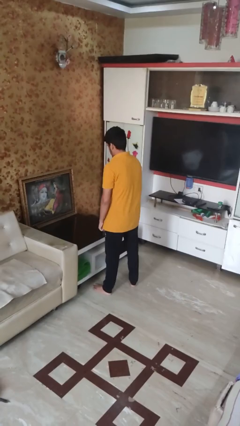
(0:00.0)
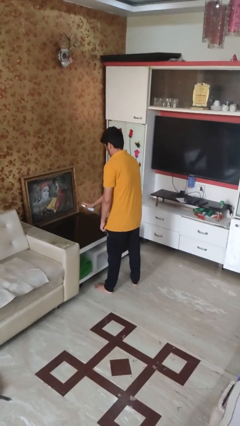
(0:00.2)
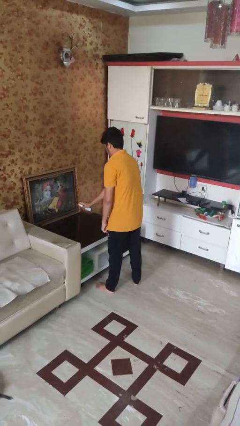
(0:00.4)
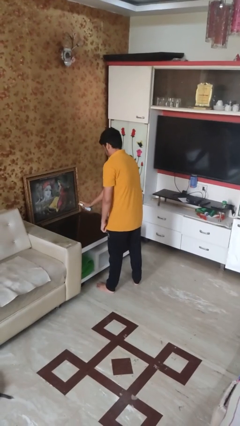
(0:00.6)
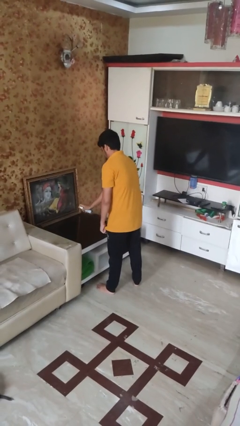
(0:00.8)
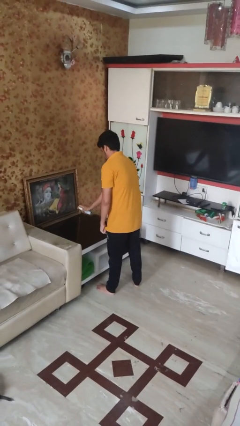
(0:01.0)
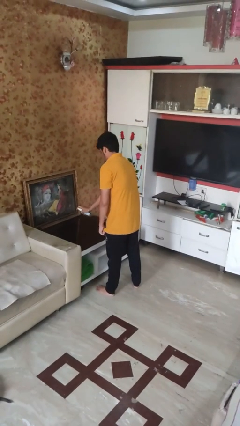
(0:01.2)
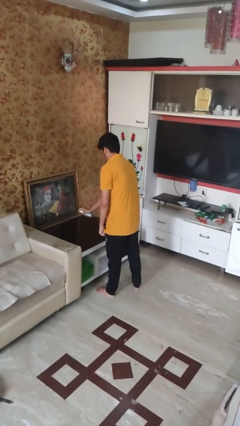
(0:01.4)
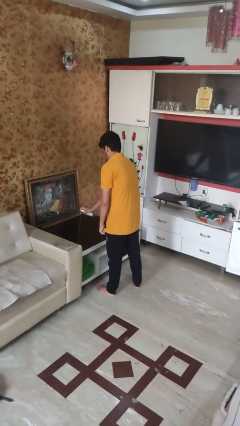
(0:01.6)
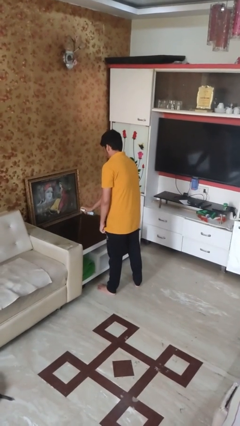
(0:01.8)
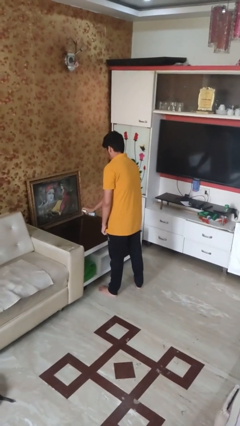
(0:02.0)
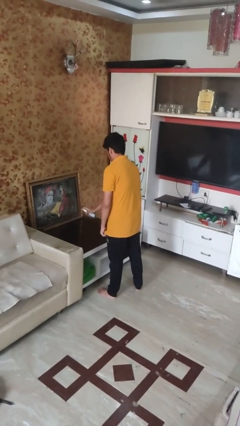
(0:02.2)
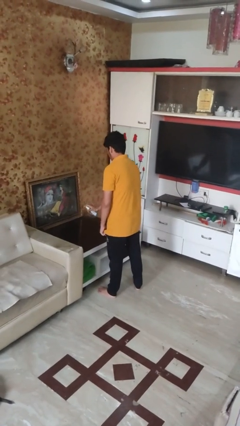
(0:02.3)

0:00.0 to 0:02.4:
person sprays from bottle

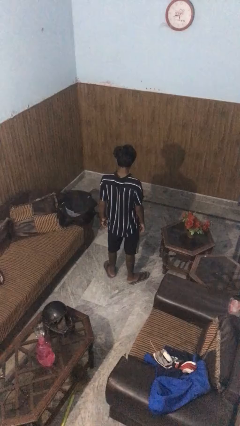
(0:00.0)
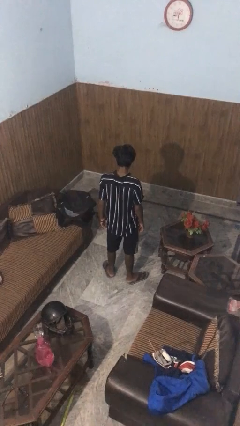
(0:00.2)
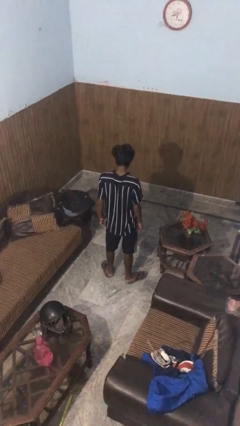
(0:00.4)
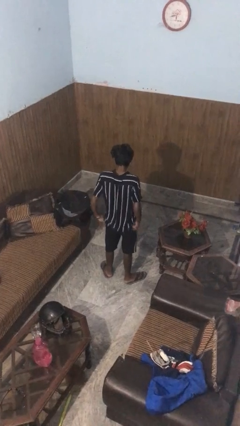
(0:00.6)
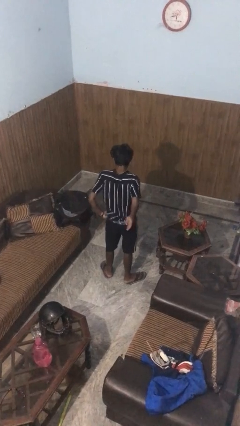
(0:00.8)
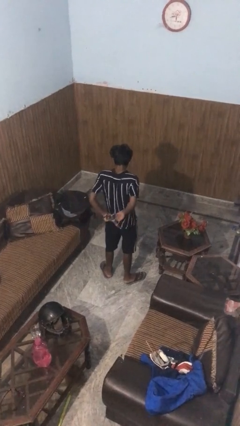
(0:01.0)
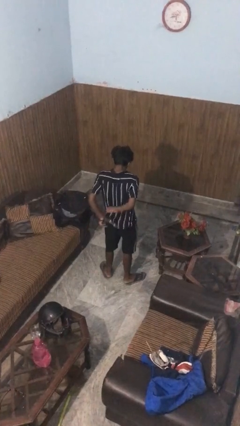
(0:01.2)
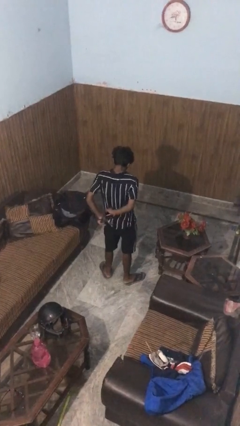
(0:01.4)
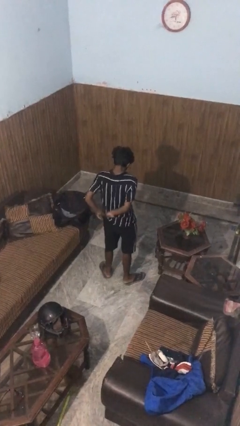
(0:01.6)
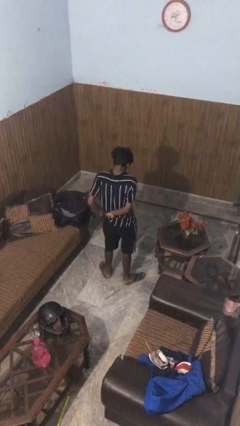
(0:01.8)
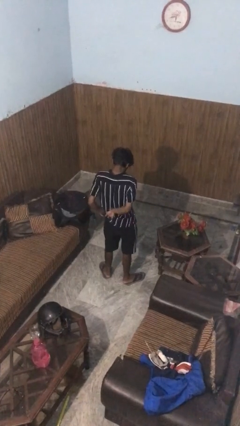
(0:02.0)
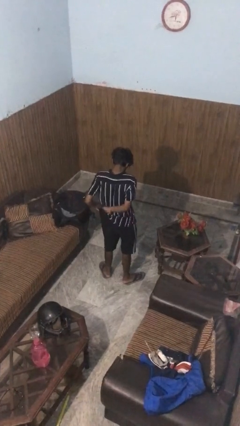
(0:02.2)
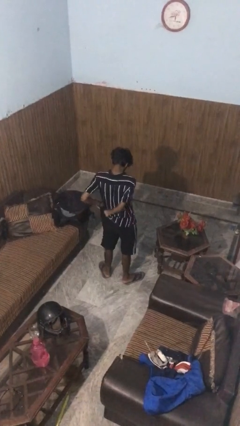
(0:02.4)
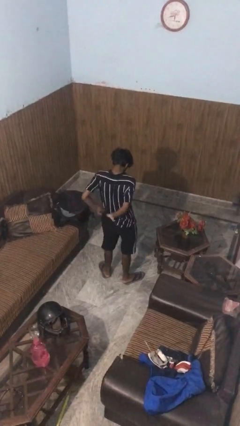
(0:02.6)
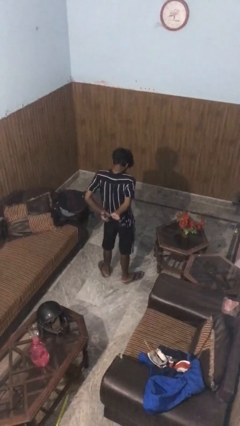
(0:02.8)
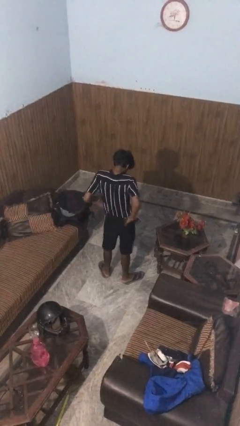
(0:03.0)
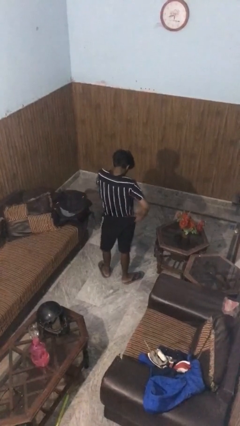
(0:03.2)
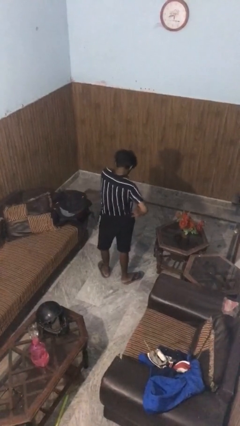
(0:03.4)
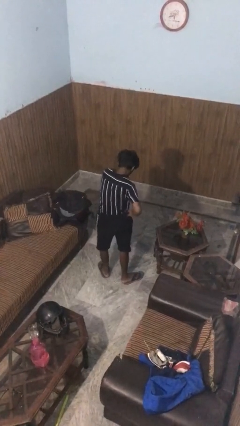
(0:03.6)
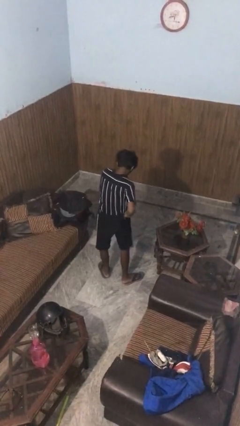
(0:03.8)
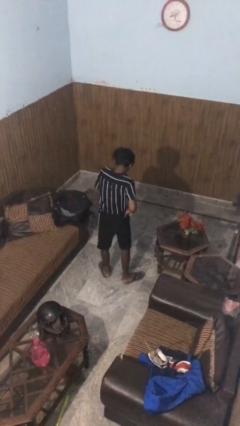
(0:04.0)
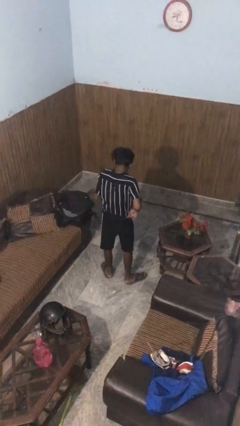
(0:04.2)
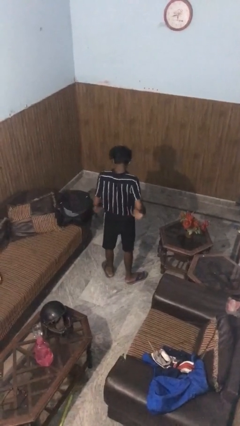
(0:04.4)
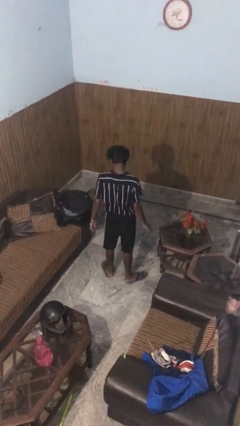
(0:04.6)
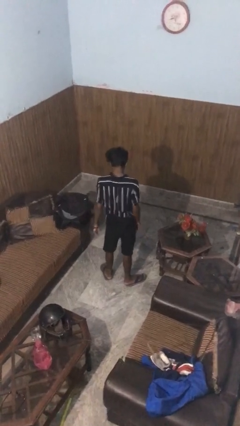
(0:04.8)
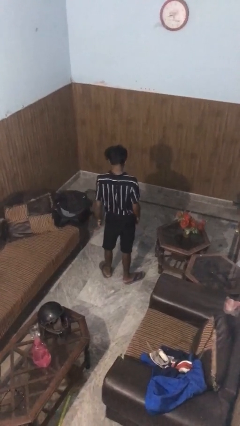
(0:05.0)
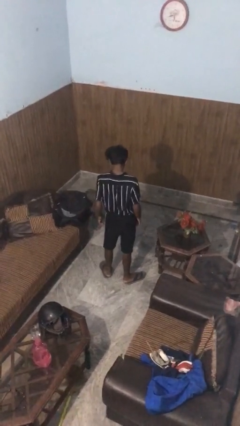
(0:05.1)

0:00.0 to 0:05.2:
person tucks in shirt

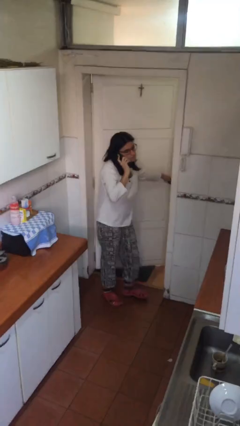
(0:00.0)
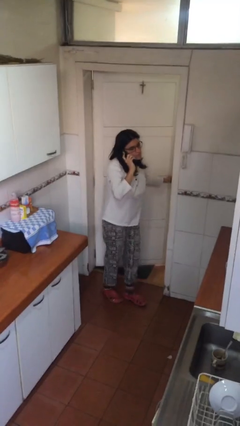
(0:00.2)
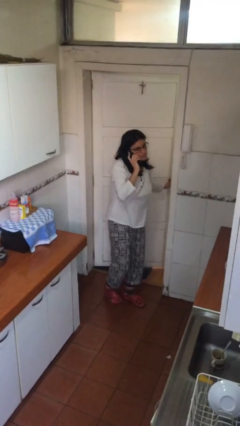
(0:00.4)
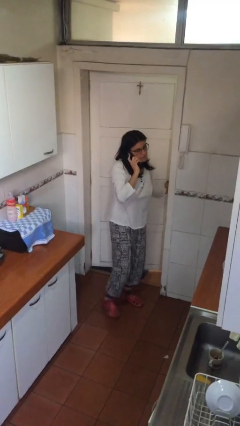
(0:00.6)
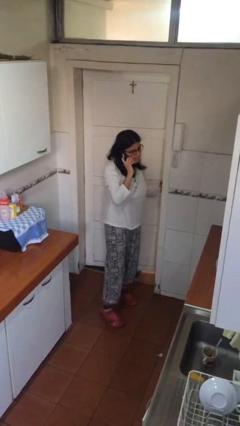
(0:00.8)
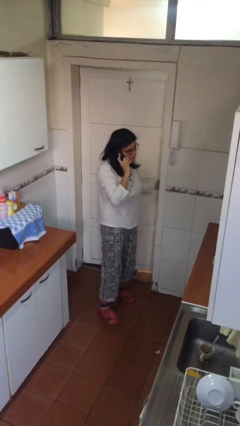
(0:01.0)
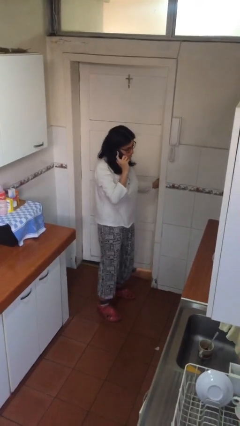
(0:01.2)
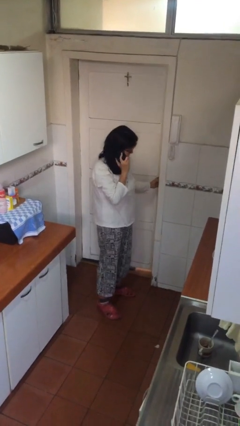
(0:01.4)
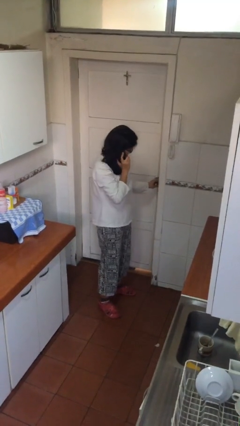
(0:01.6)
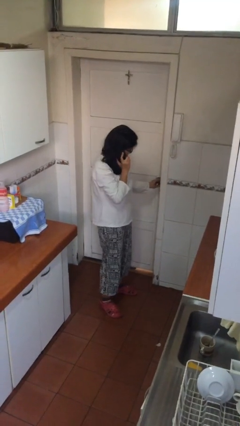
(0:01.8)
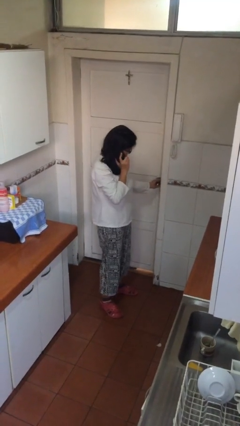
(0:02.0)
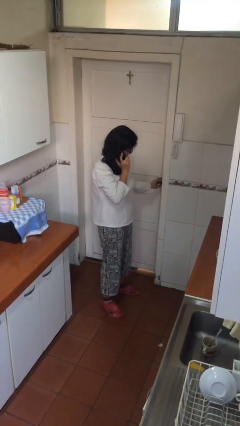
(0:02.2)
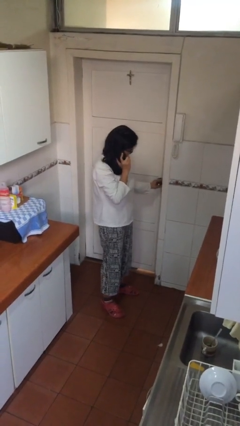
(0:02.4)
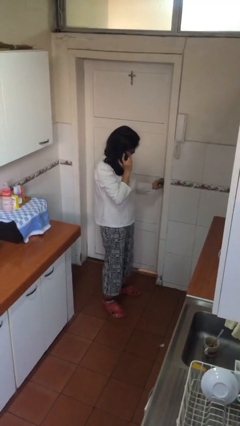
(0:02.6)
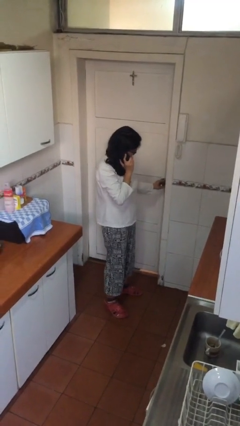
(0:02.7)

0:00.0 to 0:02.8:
person closes facility door

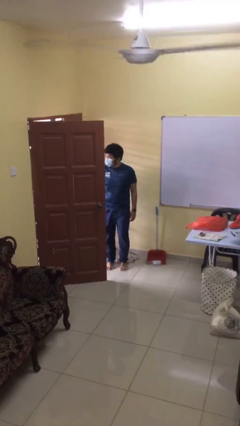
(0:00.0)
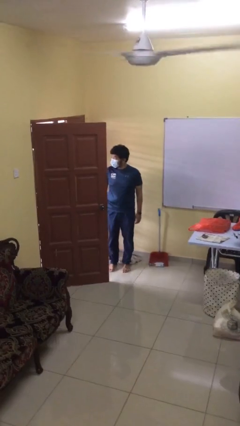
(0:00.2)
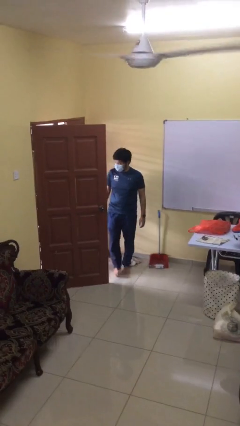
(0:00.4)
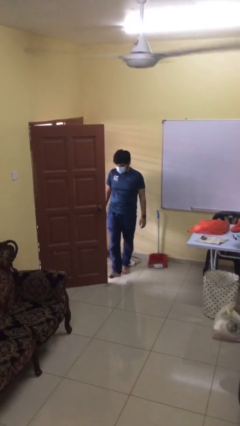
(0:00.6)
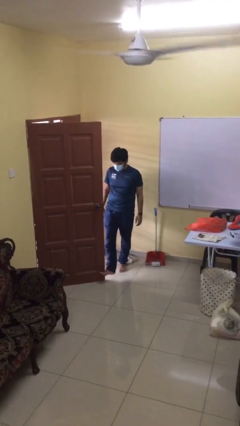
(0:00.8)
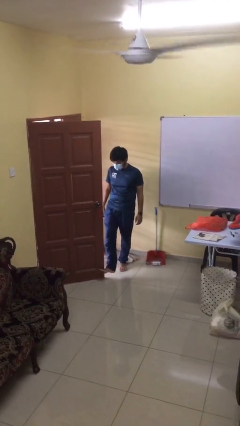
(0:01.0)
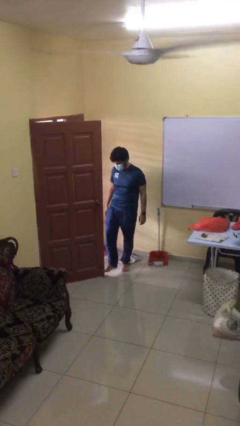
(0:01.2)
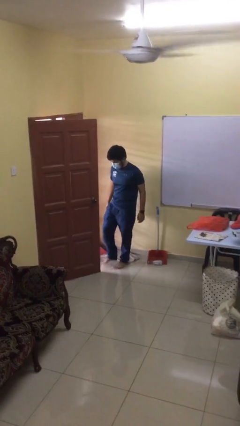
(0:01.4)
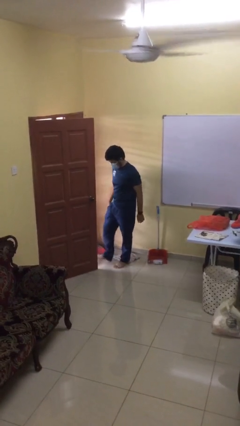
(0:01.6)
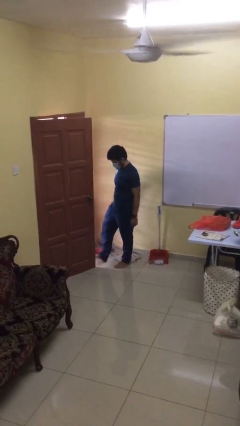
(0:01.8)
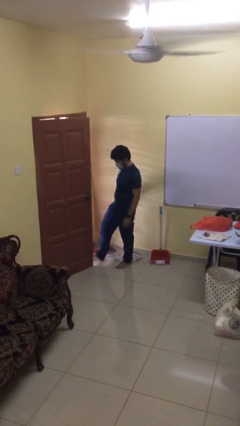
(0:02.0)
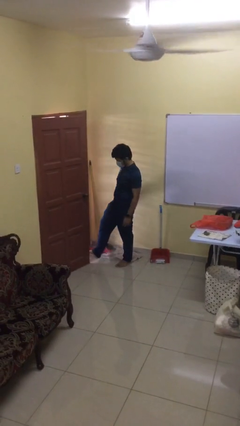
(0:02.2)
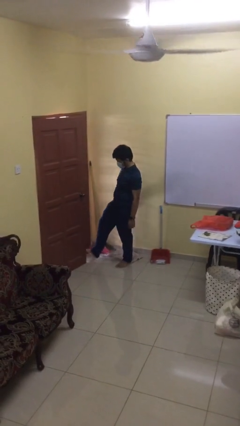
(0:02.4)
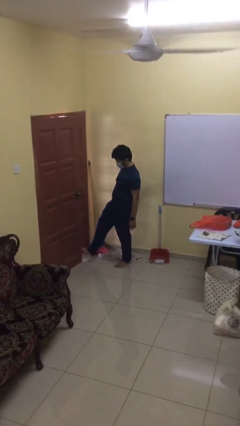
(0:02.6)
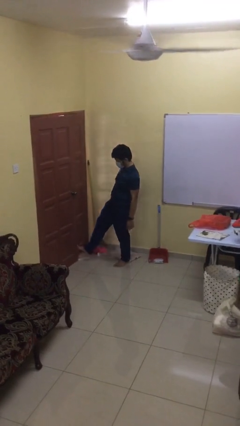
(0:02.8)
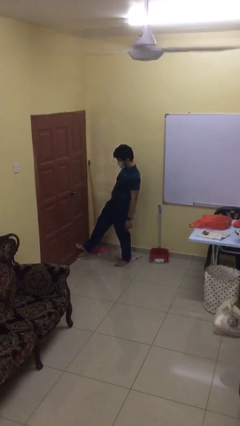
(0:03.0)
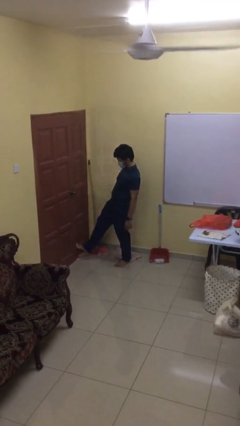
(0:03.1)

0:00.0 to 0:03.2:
person closes door with foot

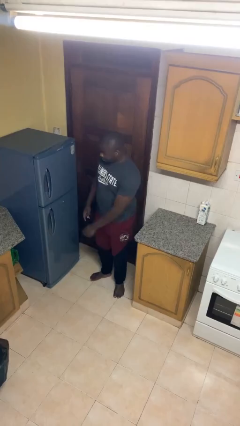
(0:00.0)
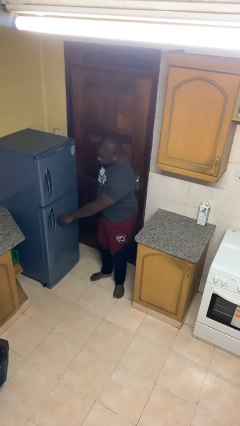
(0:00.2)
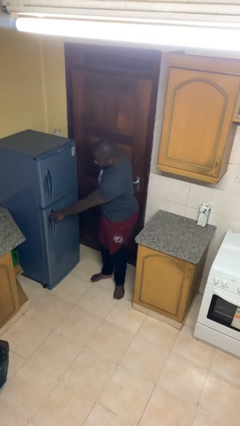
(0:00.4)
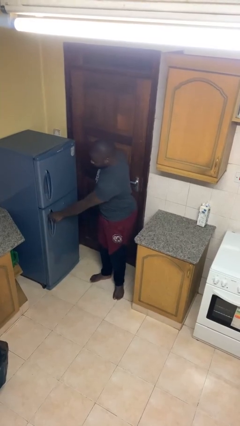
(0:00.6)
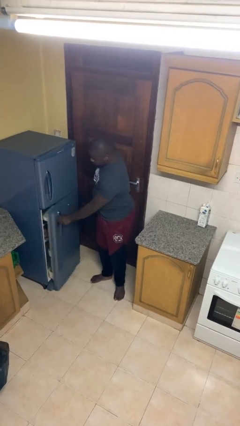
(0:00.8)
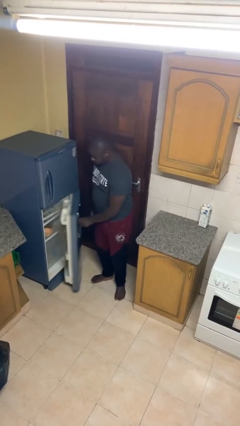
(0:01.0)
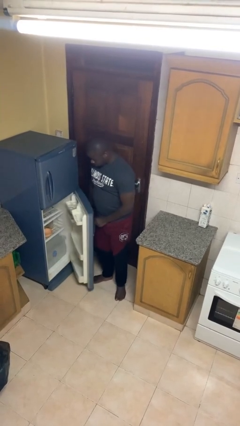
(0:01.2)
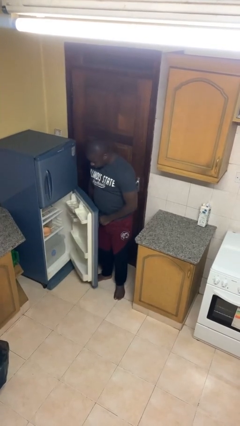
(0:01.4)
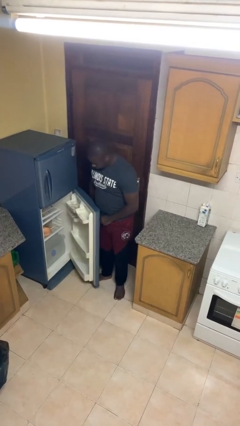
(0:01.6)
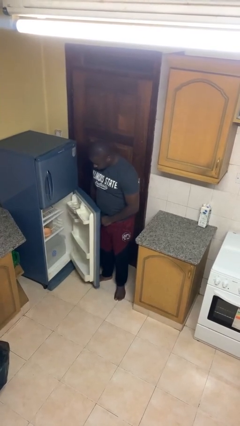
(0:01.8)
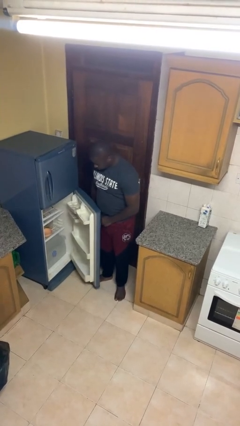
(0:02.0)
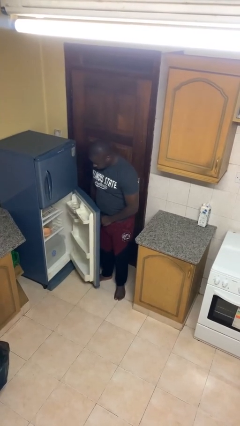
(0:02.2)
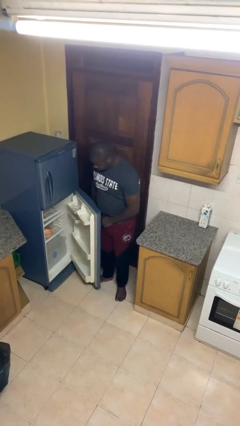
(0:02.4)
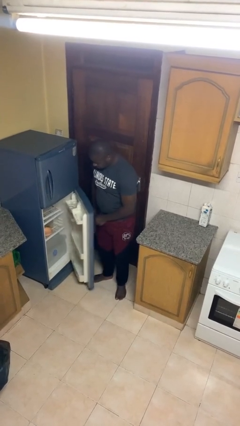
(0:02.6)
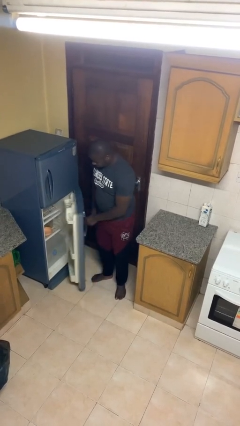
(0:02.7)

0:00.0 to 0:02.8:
person opens refrigerator

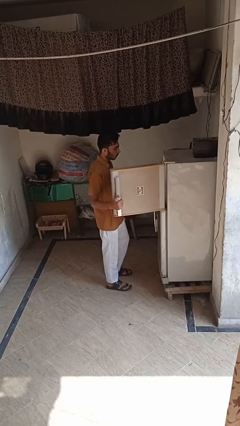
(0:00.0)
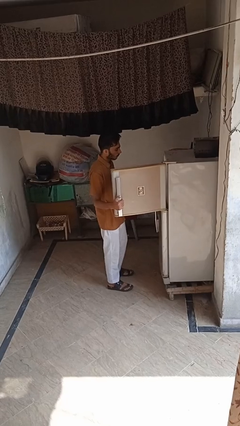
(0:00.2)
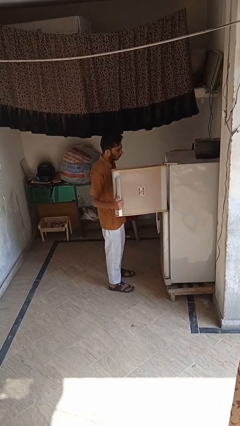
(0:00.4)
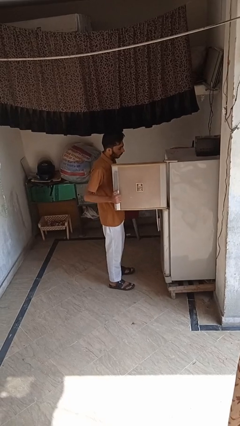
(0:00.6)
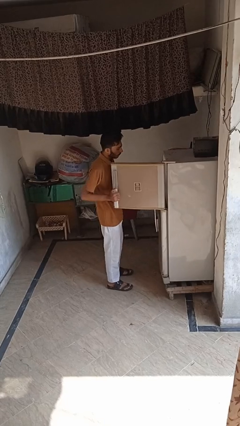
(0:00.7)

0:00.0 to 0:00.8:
person closes refrigerator

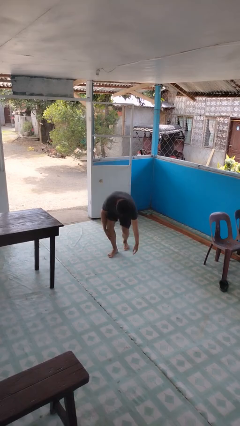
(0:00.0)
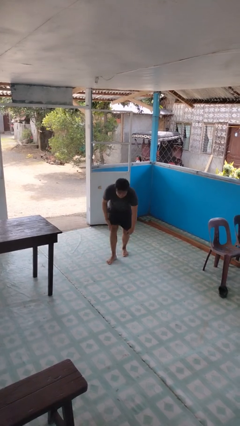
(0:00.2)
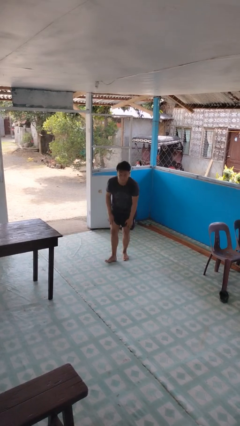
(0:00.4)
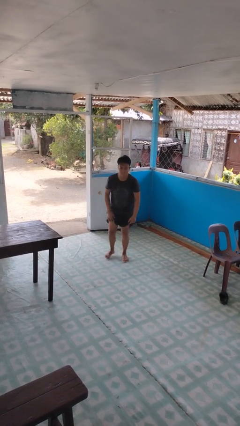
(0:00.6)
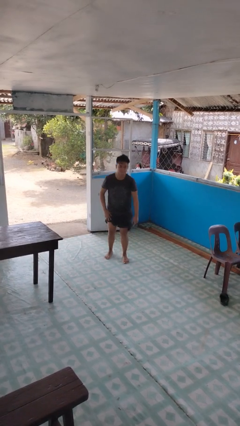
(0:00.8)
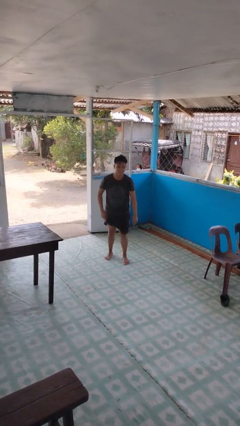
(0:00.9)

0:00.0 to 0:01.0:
person stands up from floor
